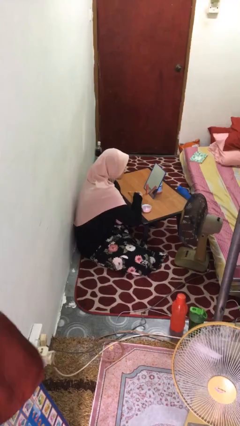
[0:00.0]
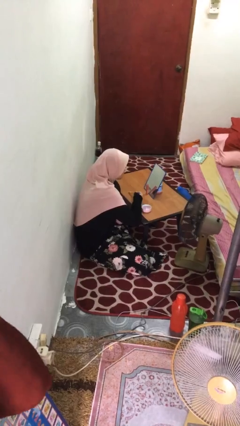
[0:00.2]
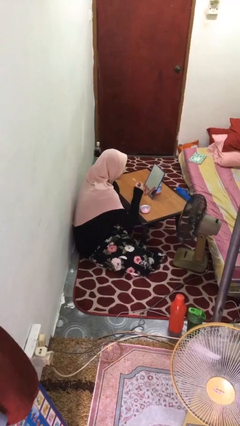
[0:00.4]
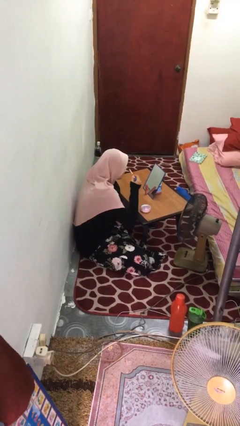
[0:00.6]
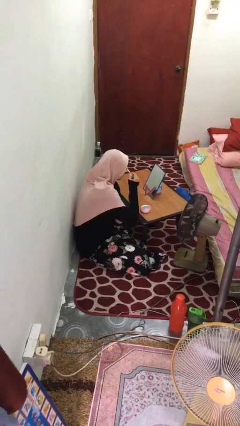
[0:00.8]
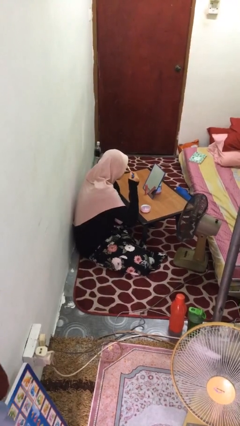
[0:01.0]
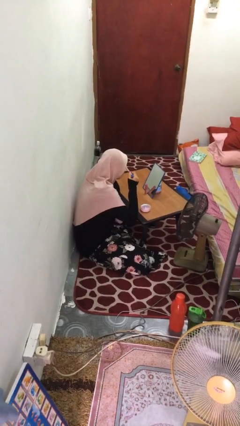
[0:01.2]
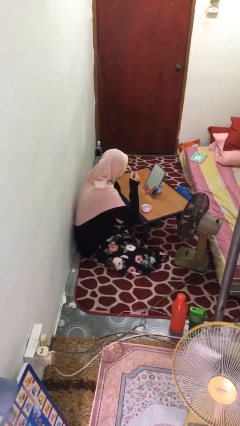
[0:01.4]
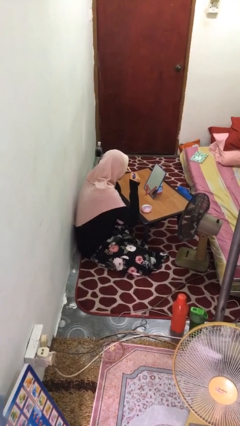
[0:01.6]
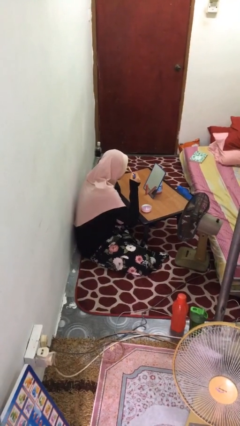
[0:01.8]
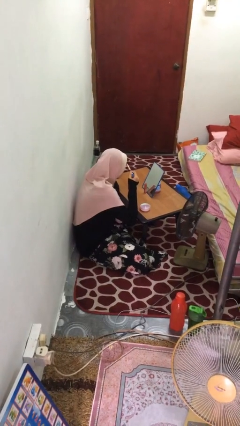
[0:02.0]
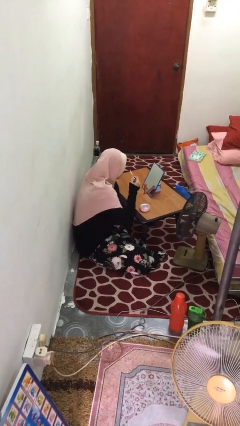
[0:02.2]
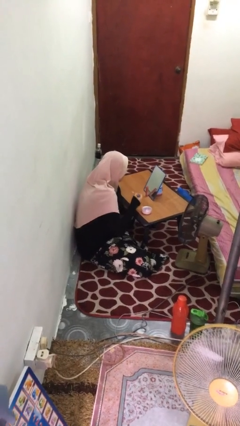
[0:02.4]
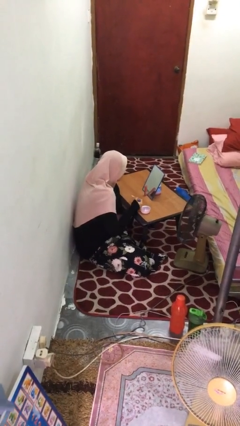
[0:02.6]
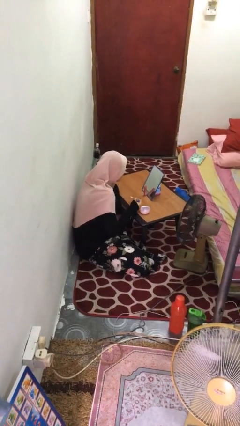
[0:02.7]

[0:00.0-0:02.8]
person applies eye makeup

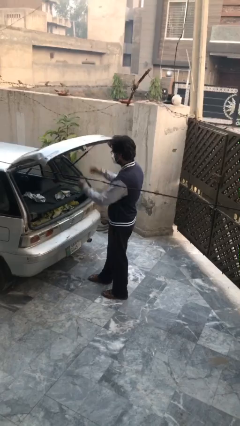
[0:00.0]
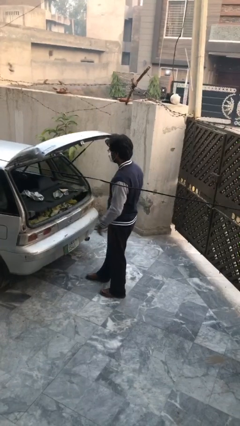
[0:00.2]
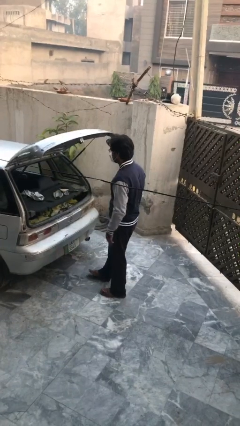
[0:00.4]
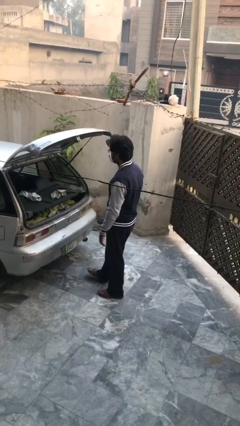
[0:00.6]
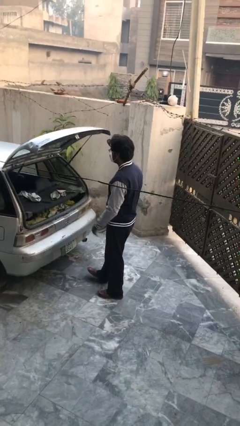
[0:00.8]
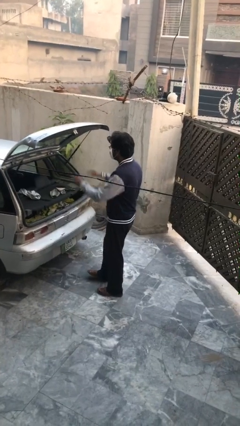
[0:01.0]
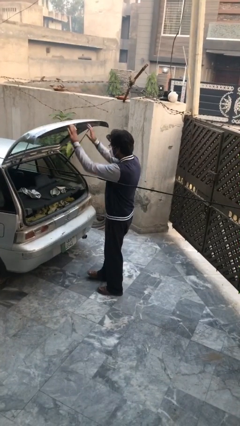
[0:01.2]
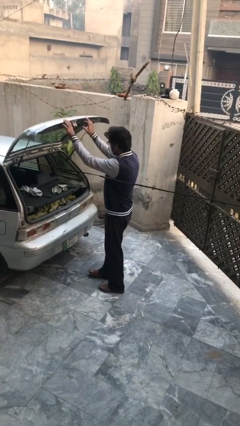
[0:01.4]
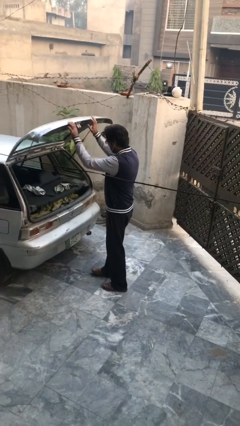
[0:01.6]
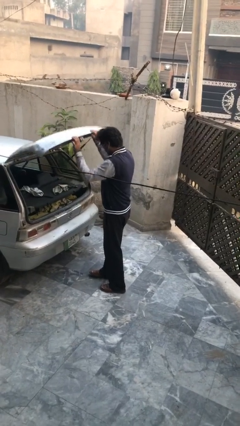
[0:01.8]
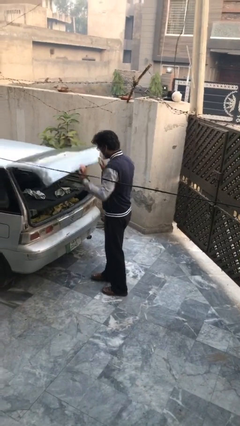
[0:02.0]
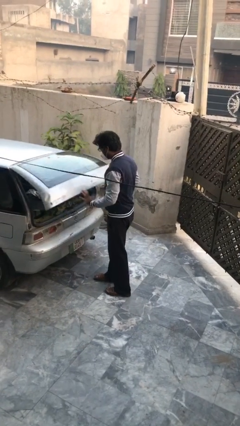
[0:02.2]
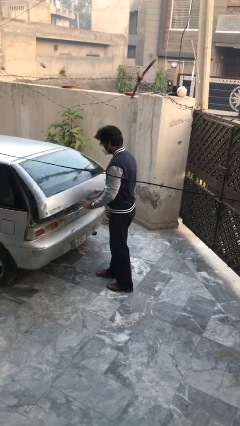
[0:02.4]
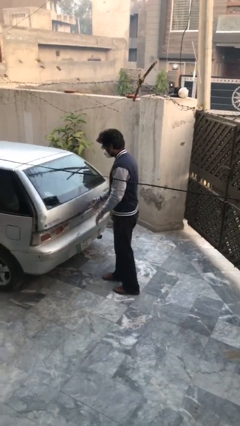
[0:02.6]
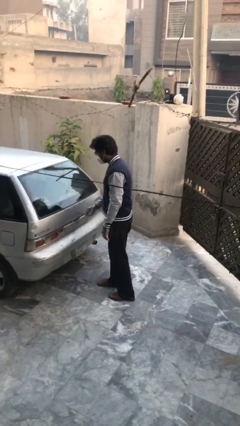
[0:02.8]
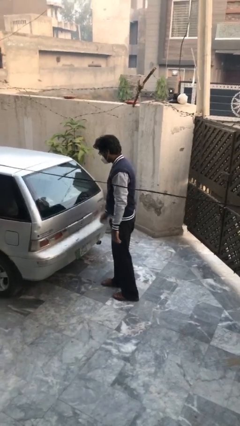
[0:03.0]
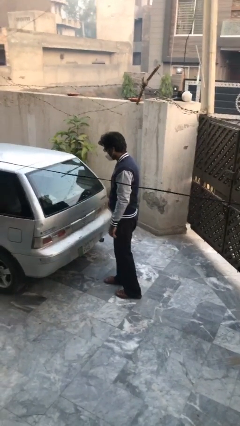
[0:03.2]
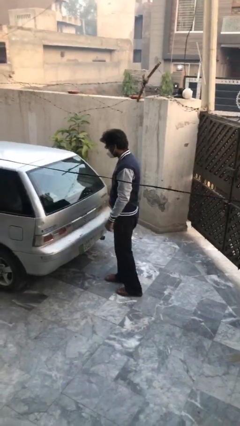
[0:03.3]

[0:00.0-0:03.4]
person closes car trunk

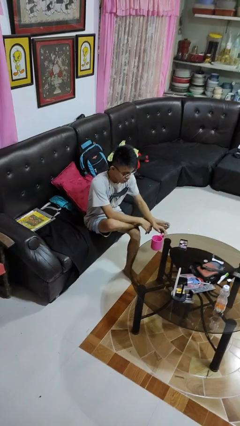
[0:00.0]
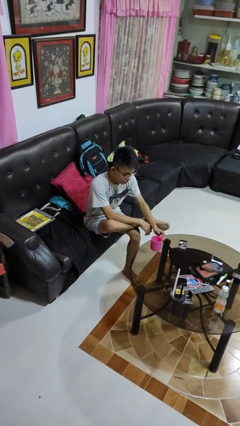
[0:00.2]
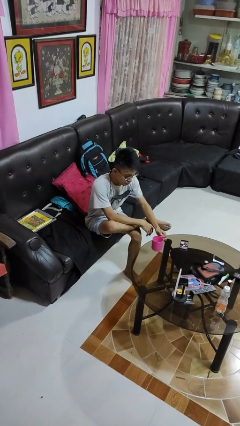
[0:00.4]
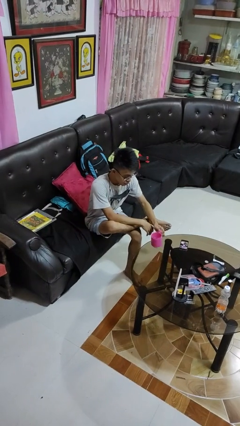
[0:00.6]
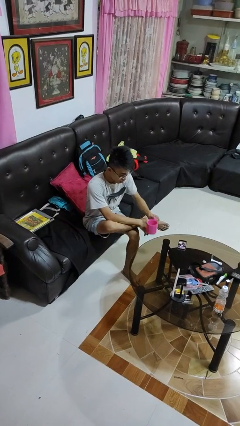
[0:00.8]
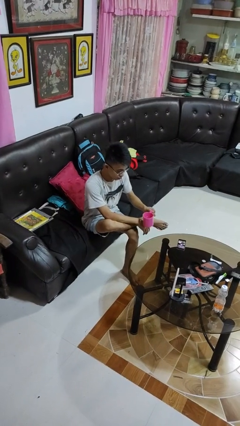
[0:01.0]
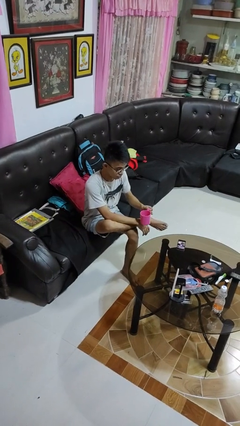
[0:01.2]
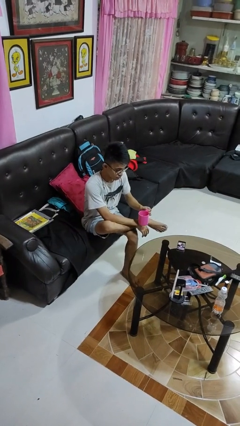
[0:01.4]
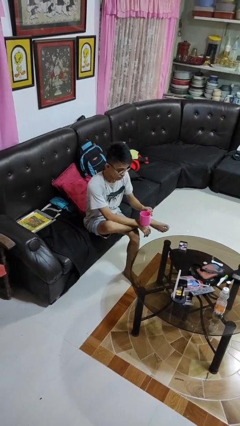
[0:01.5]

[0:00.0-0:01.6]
person picks up object from table

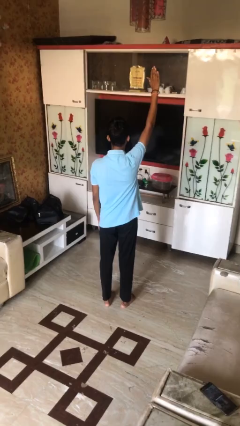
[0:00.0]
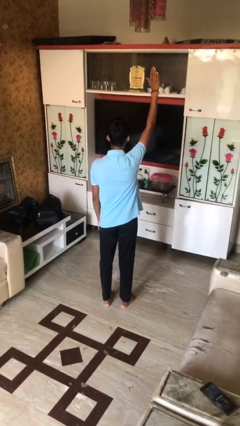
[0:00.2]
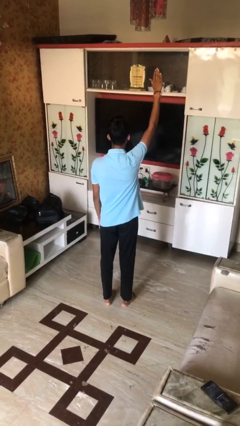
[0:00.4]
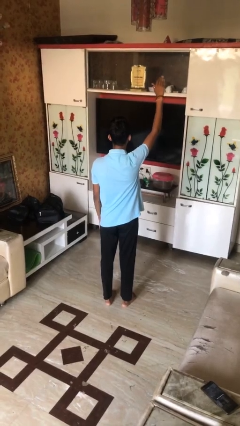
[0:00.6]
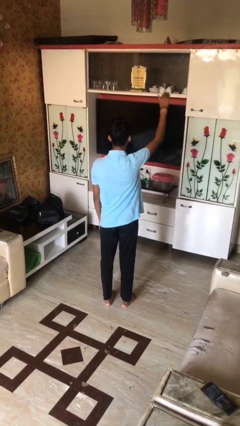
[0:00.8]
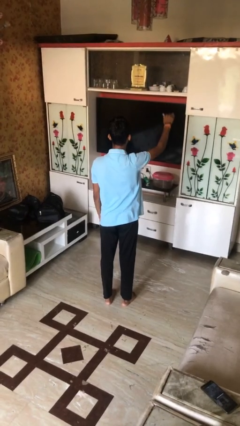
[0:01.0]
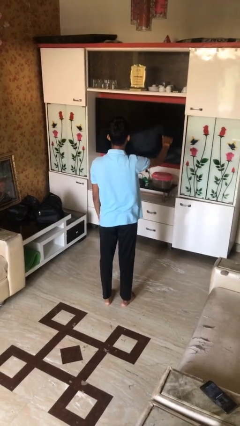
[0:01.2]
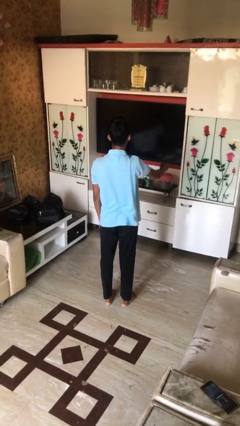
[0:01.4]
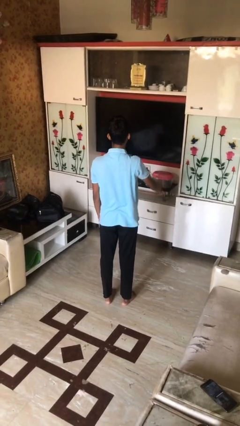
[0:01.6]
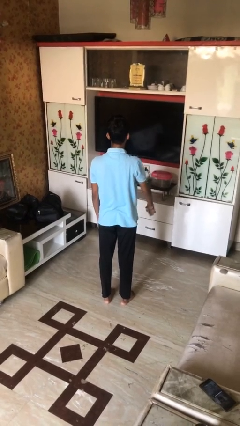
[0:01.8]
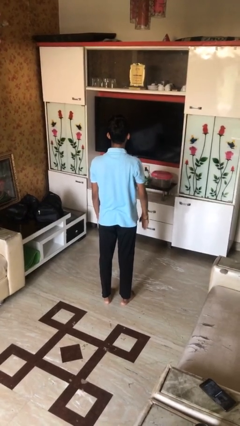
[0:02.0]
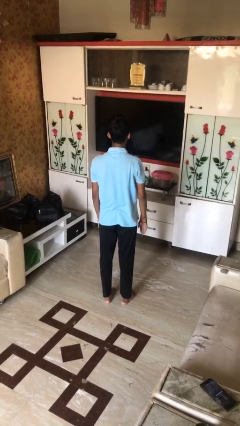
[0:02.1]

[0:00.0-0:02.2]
person gestures lower hand

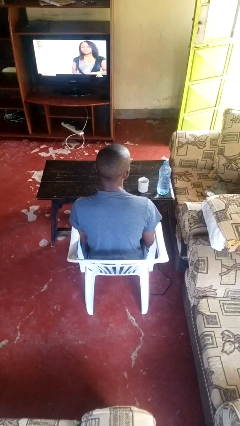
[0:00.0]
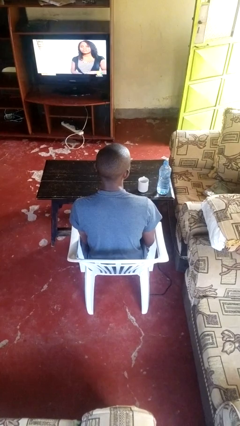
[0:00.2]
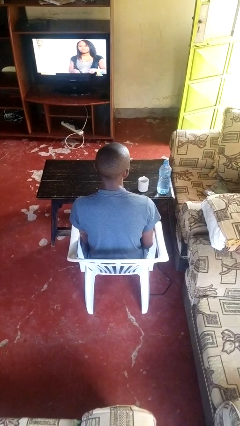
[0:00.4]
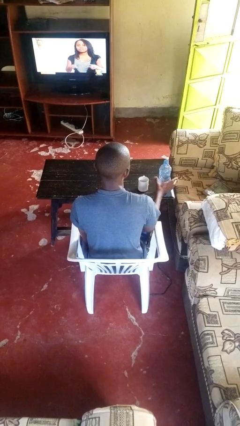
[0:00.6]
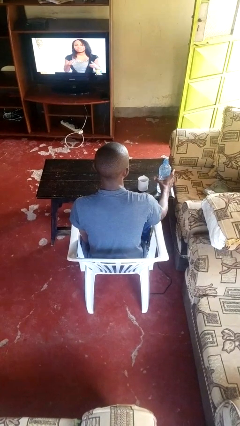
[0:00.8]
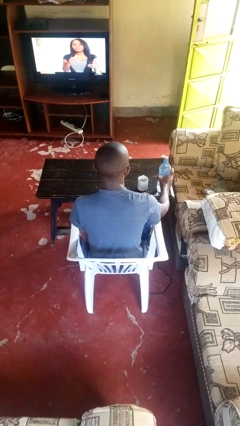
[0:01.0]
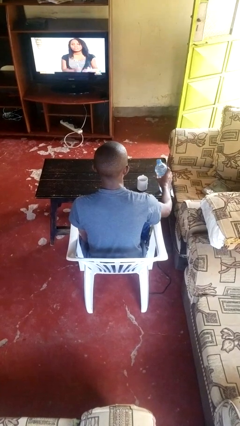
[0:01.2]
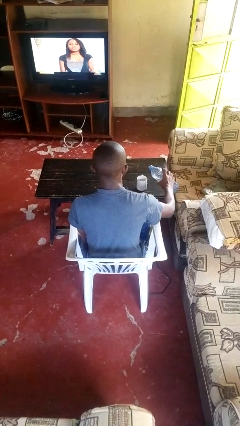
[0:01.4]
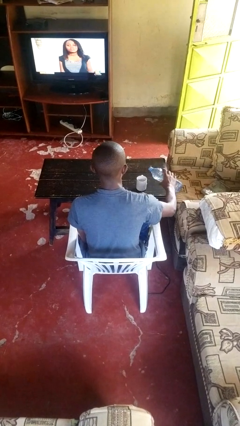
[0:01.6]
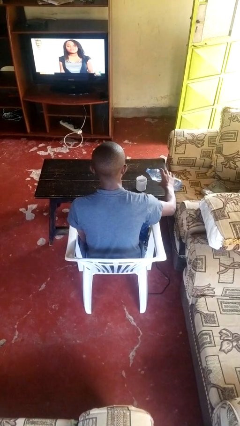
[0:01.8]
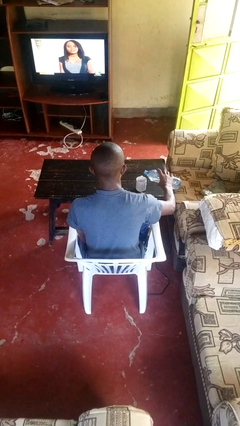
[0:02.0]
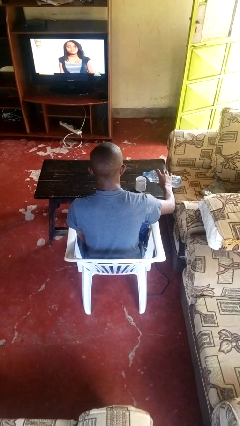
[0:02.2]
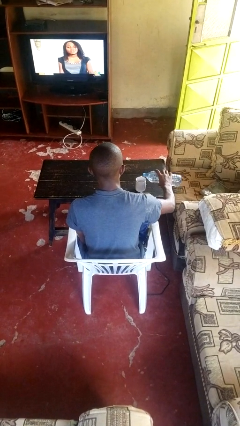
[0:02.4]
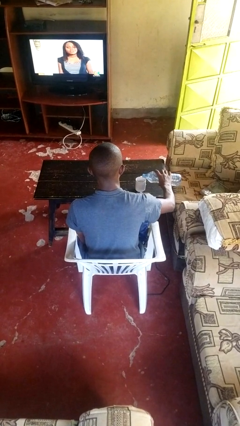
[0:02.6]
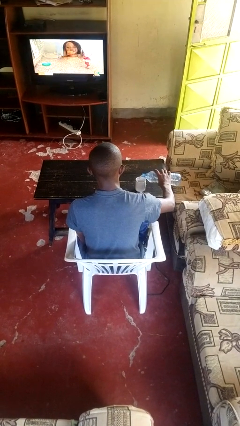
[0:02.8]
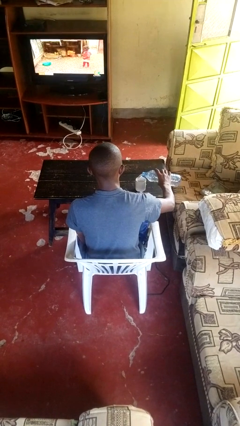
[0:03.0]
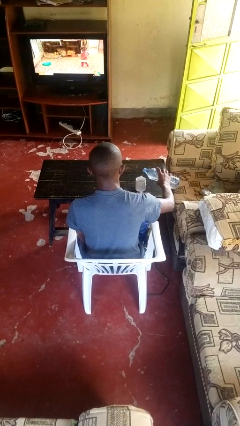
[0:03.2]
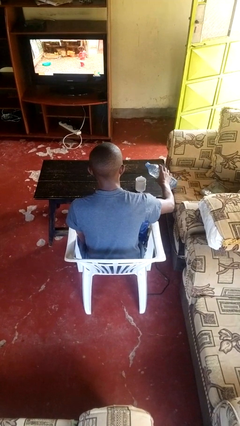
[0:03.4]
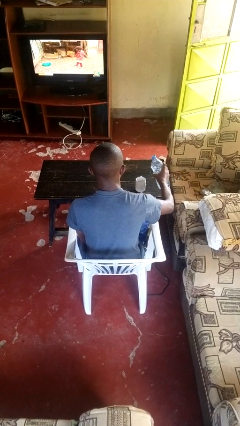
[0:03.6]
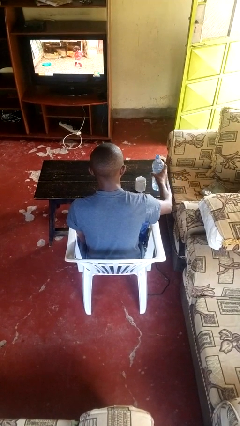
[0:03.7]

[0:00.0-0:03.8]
person pours liquid into cup

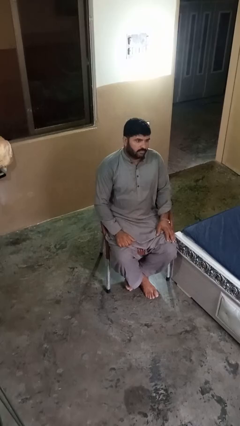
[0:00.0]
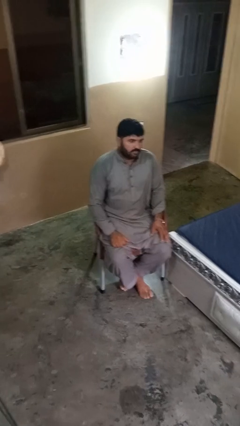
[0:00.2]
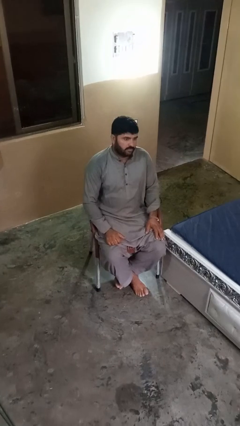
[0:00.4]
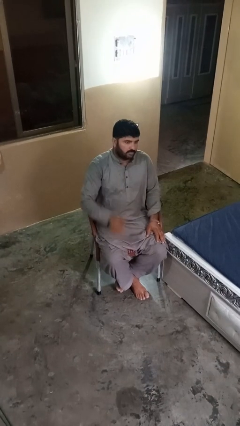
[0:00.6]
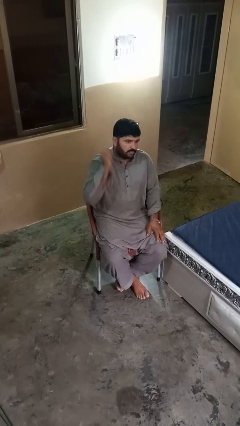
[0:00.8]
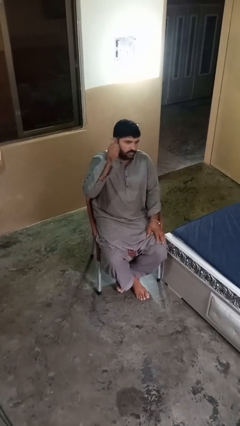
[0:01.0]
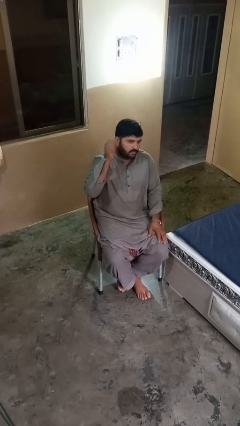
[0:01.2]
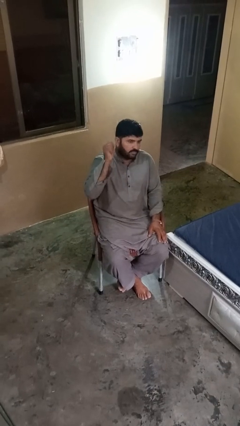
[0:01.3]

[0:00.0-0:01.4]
person gestures behind me

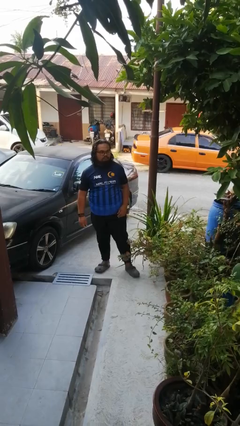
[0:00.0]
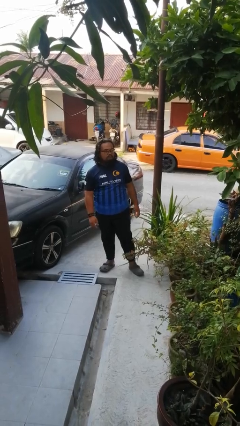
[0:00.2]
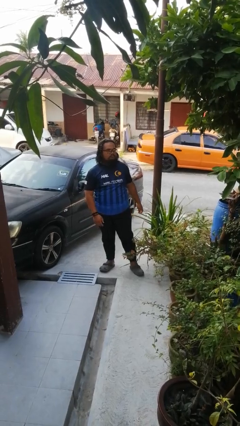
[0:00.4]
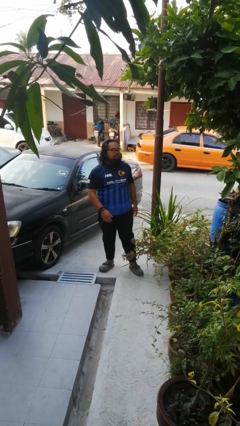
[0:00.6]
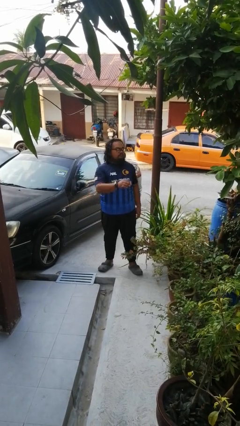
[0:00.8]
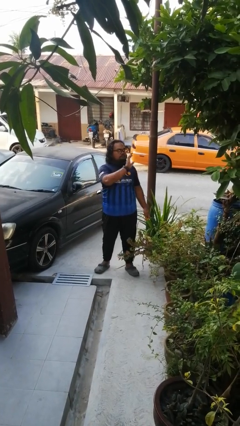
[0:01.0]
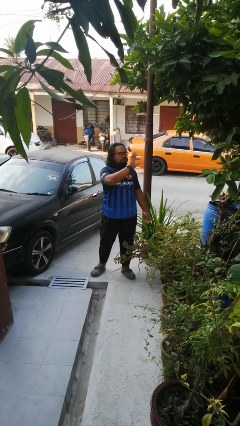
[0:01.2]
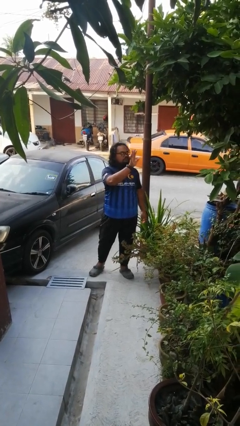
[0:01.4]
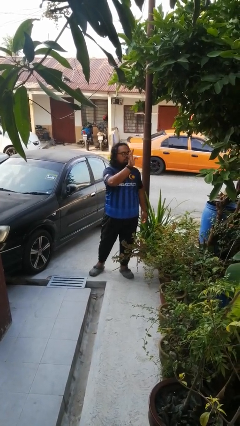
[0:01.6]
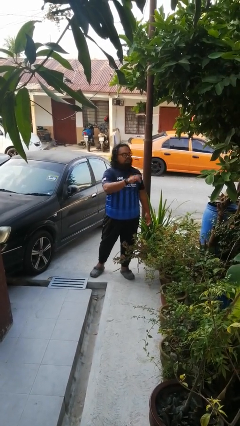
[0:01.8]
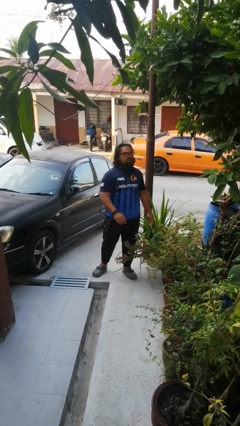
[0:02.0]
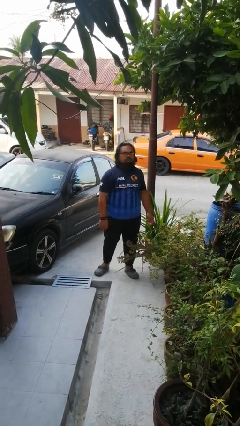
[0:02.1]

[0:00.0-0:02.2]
person waves at person
